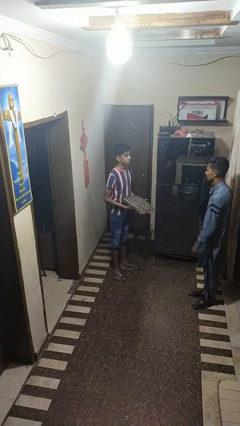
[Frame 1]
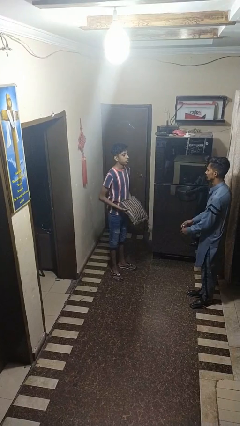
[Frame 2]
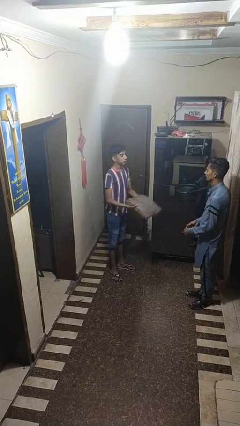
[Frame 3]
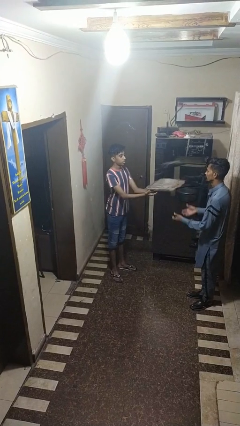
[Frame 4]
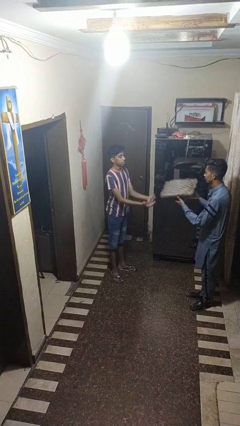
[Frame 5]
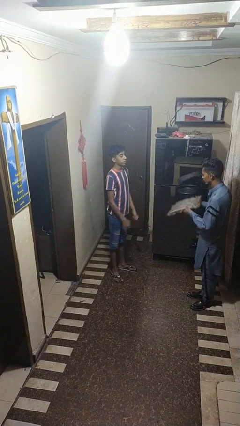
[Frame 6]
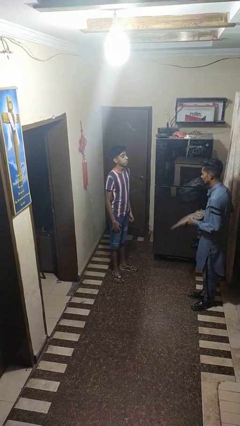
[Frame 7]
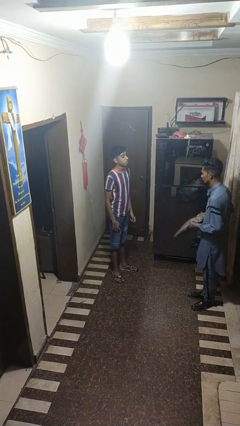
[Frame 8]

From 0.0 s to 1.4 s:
person throws object to person

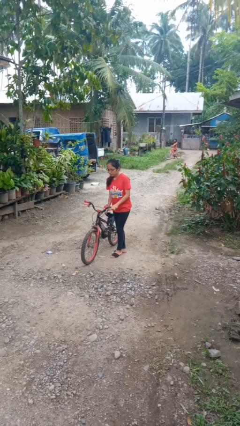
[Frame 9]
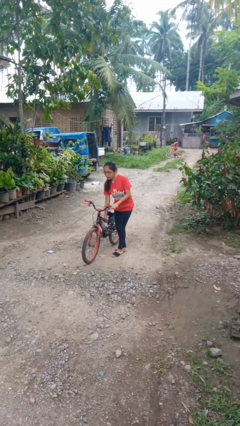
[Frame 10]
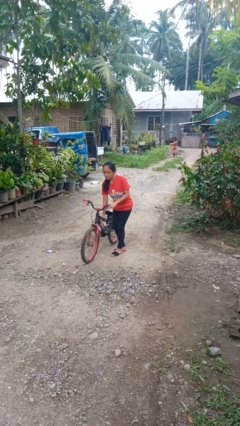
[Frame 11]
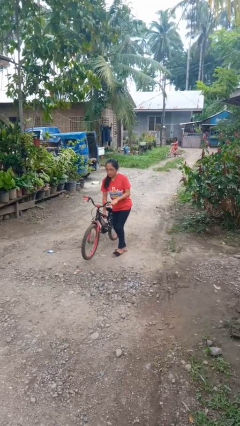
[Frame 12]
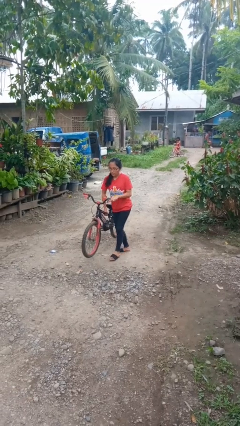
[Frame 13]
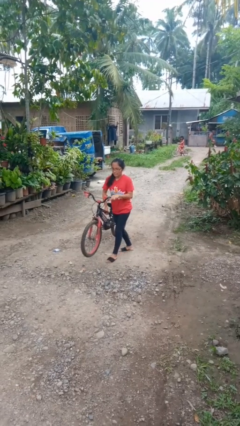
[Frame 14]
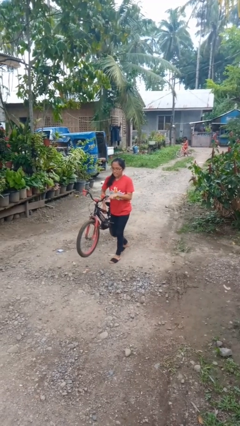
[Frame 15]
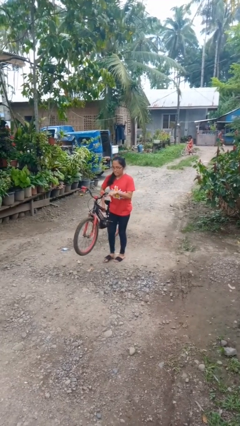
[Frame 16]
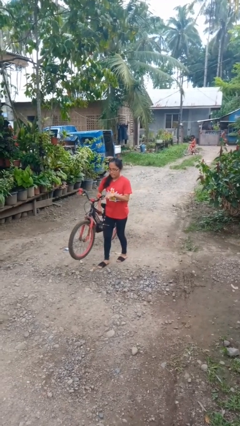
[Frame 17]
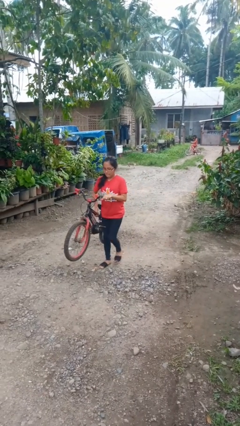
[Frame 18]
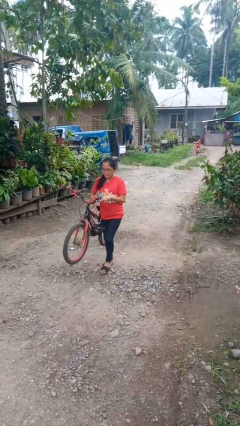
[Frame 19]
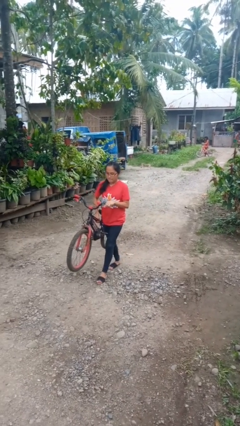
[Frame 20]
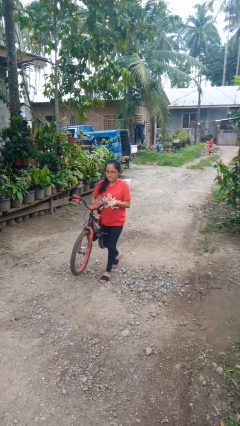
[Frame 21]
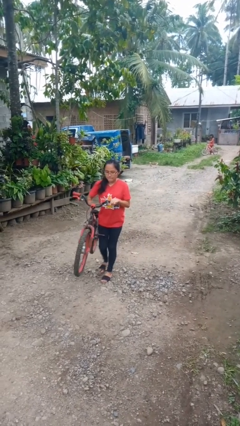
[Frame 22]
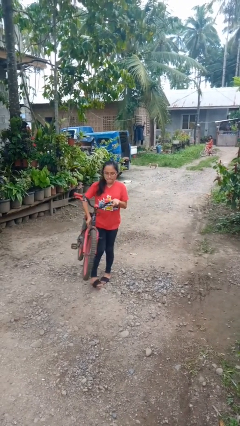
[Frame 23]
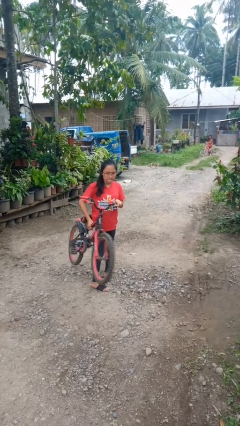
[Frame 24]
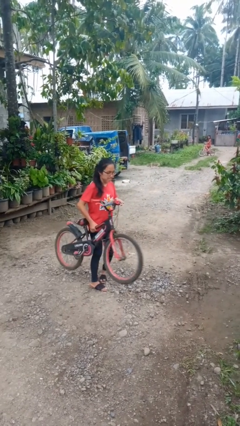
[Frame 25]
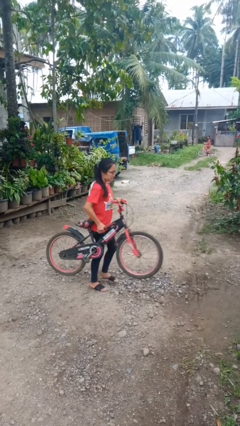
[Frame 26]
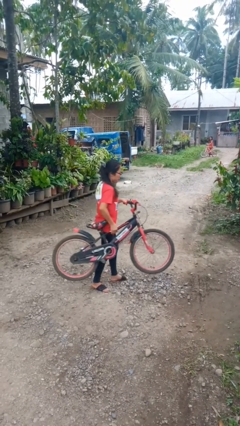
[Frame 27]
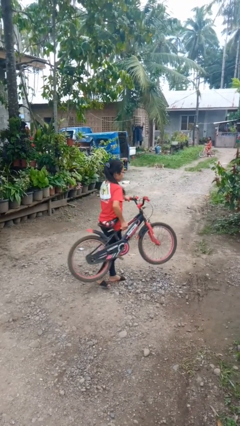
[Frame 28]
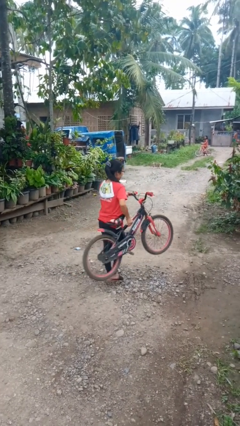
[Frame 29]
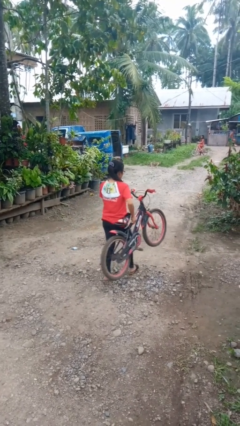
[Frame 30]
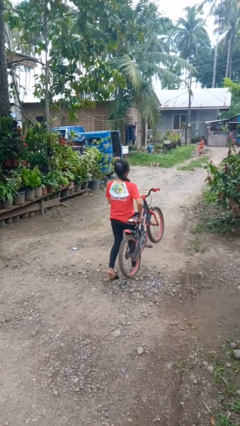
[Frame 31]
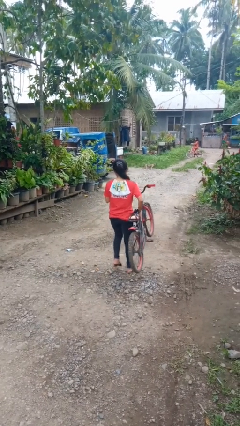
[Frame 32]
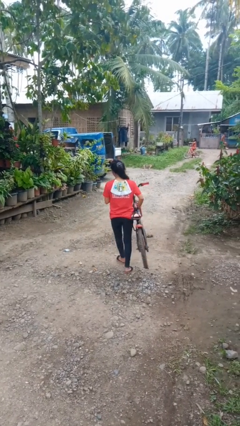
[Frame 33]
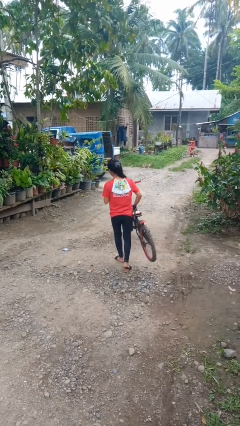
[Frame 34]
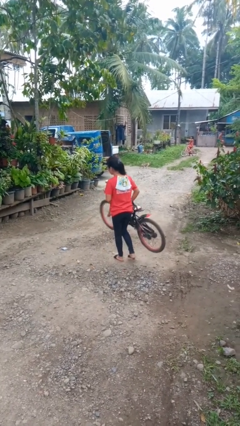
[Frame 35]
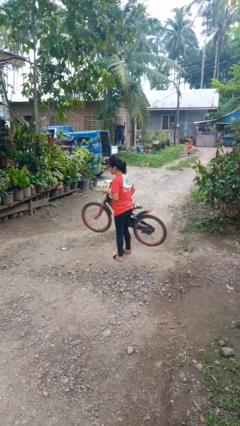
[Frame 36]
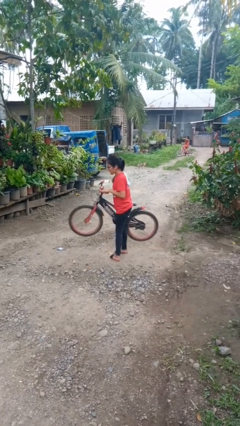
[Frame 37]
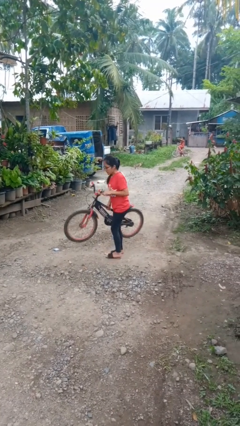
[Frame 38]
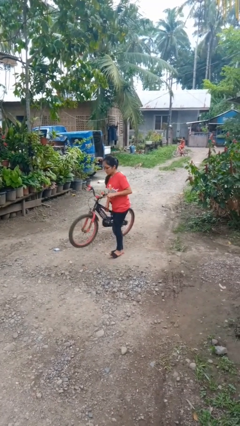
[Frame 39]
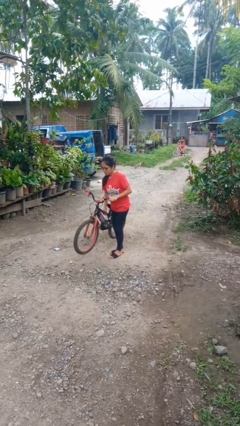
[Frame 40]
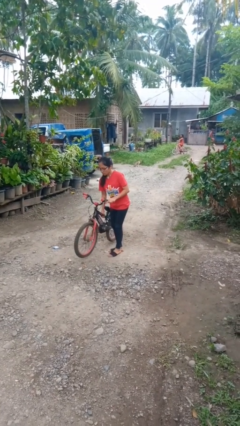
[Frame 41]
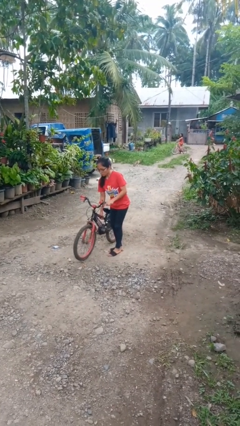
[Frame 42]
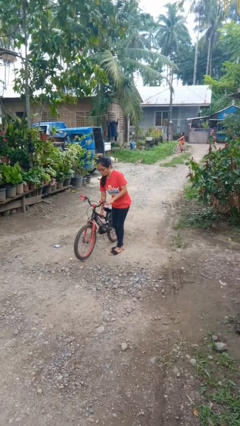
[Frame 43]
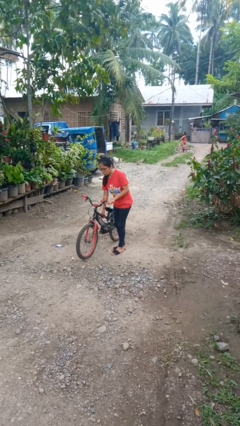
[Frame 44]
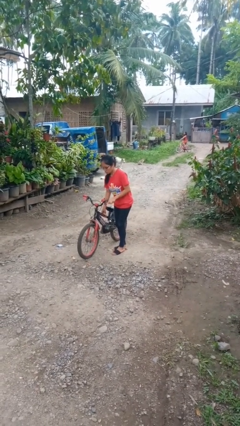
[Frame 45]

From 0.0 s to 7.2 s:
person carries bicycle

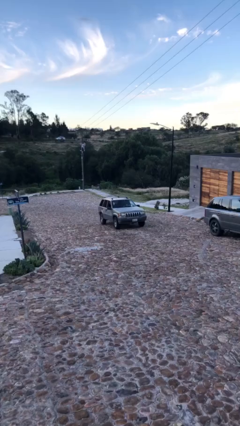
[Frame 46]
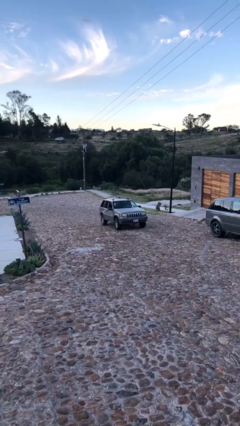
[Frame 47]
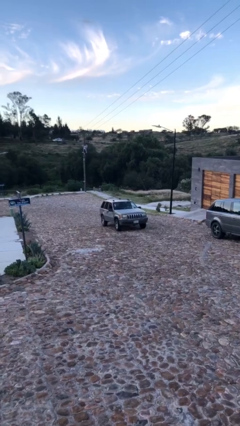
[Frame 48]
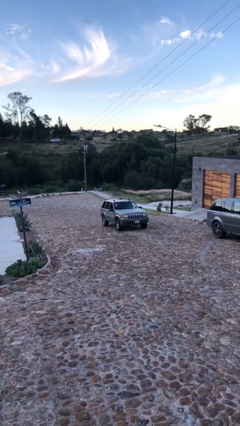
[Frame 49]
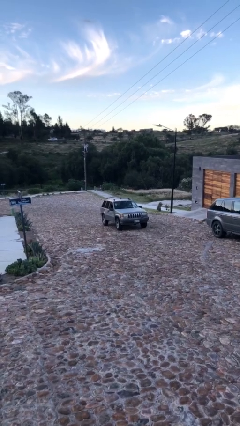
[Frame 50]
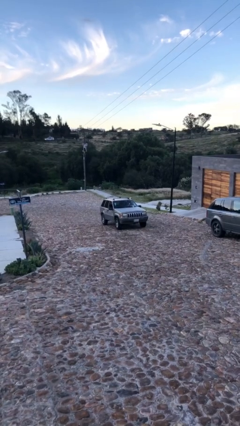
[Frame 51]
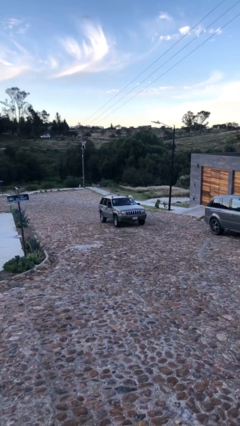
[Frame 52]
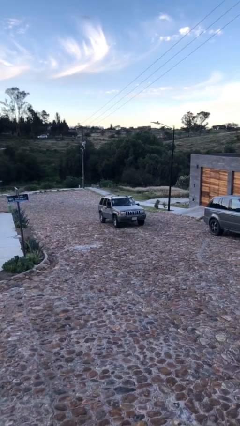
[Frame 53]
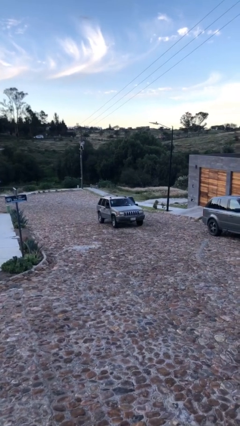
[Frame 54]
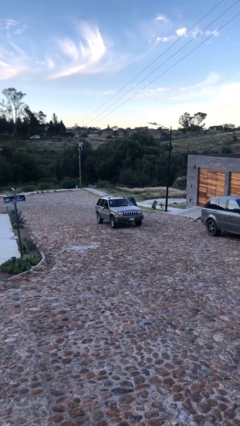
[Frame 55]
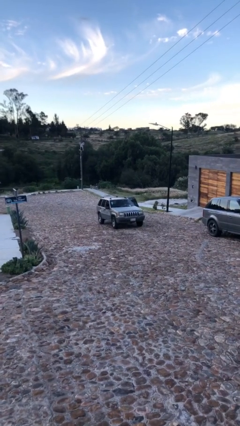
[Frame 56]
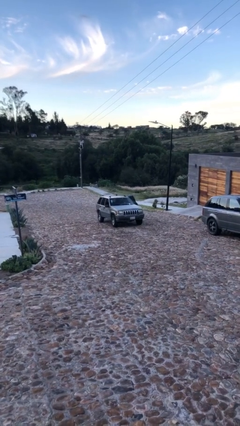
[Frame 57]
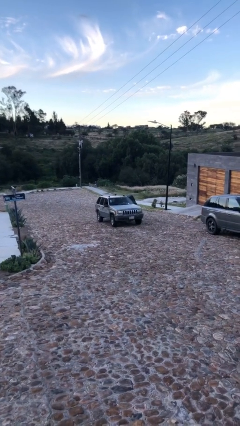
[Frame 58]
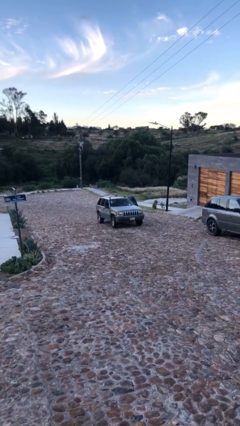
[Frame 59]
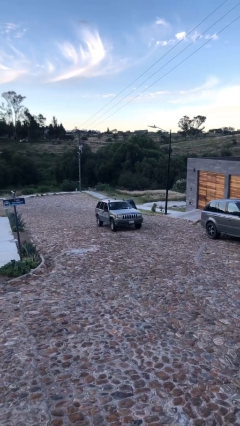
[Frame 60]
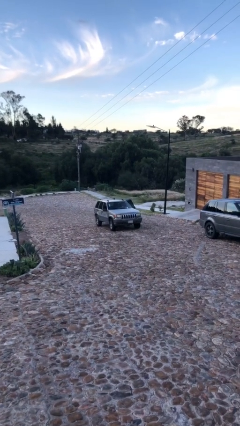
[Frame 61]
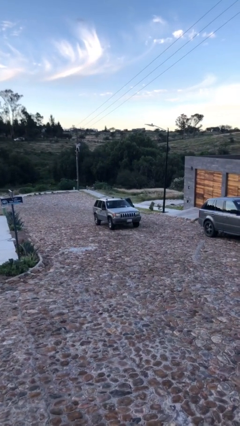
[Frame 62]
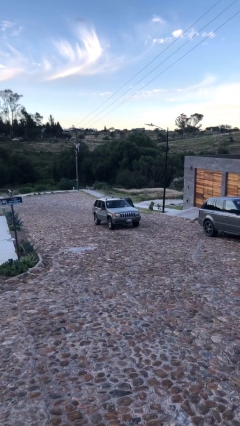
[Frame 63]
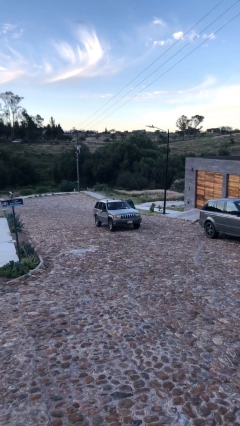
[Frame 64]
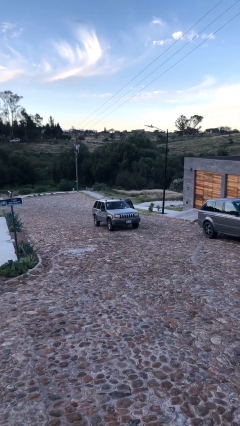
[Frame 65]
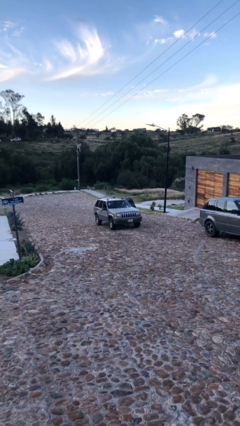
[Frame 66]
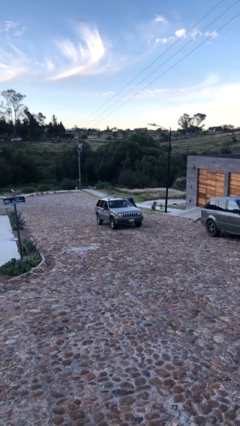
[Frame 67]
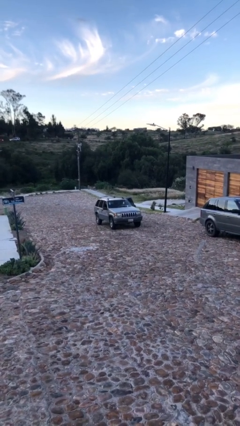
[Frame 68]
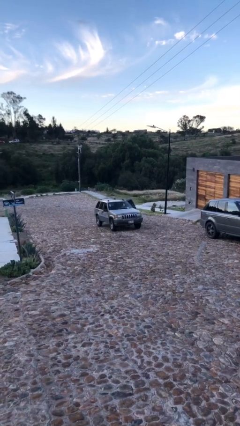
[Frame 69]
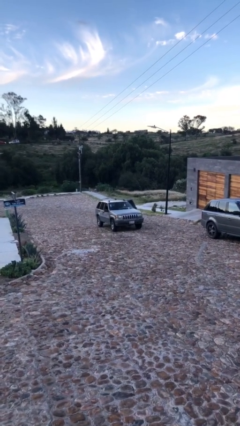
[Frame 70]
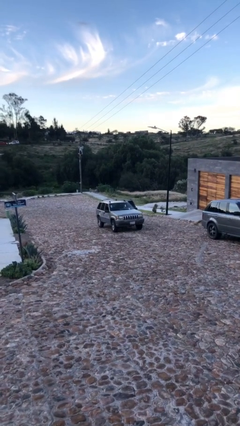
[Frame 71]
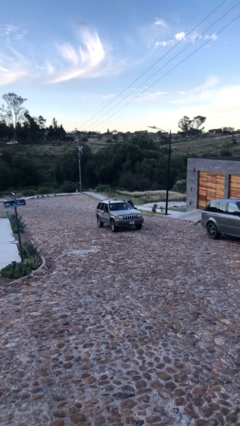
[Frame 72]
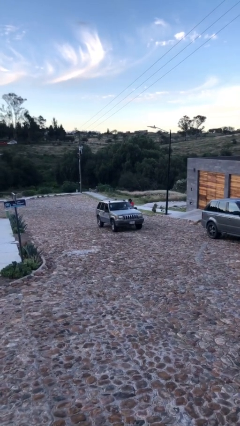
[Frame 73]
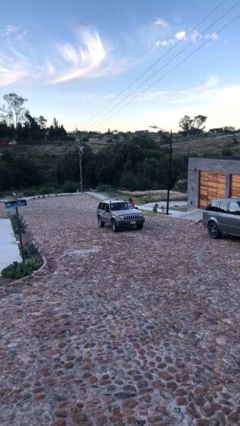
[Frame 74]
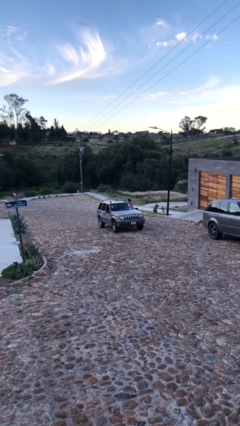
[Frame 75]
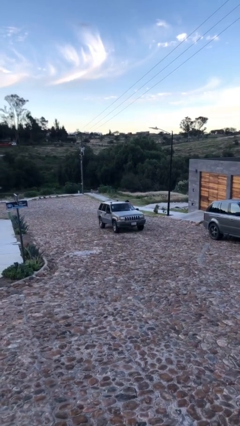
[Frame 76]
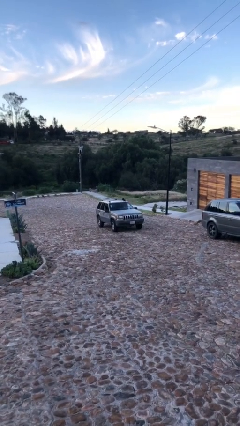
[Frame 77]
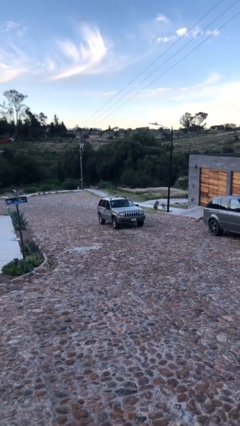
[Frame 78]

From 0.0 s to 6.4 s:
car drops off person

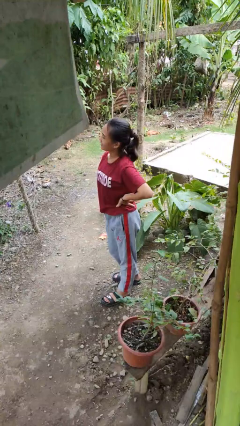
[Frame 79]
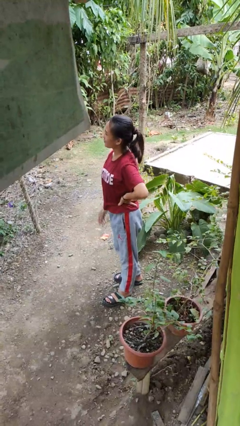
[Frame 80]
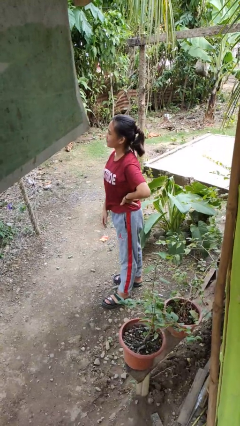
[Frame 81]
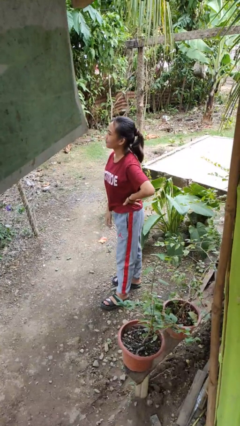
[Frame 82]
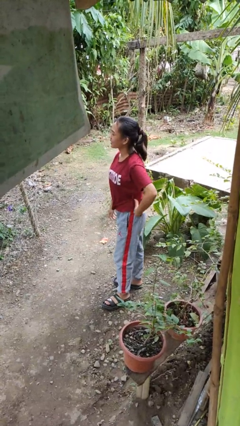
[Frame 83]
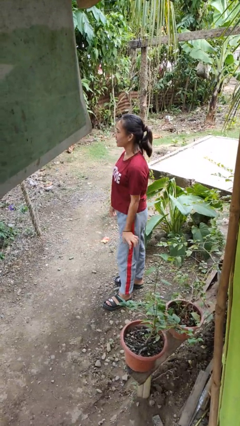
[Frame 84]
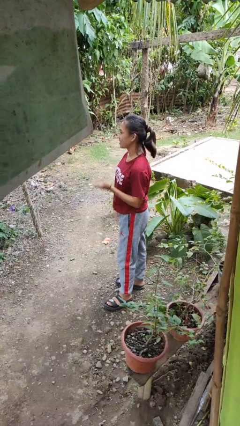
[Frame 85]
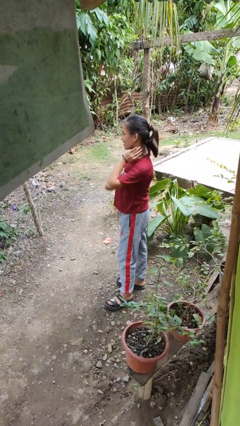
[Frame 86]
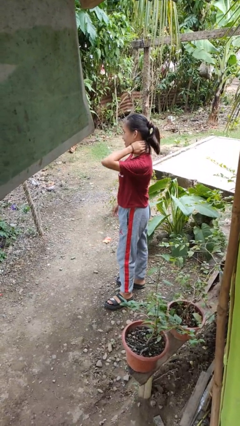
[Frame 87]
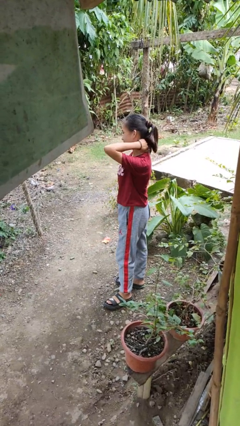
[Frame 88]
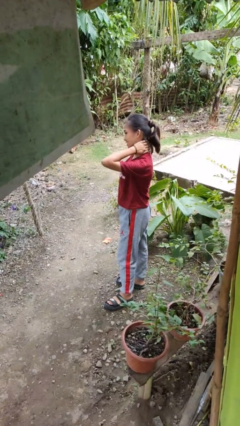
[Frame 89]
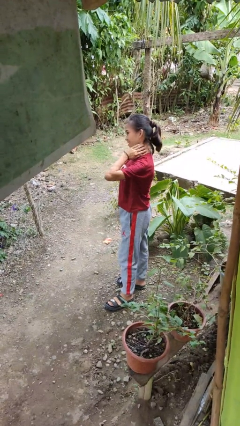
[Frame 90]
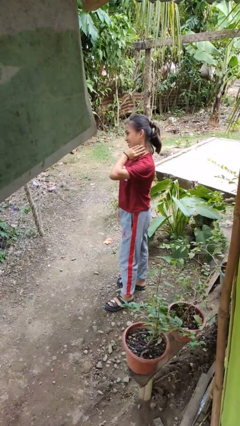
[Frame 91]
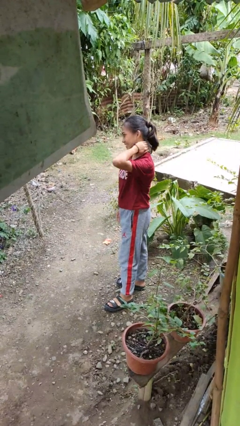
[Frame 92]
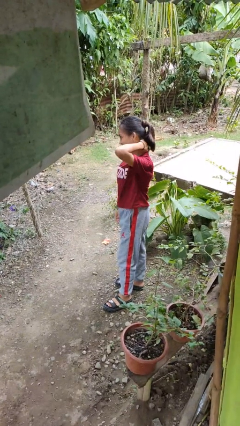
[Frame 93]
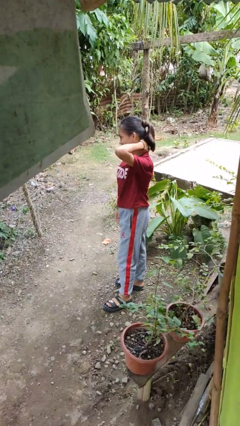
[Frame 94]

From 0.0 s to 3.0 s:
person rubs neck
